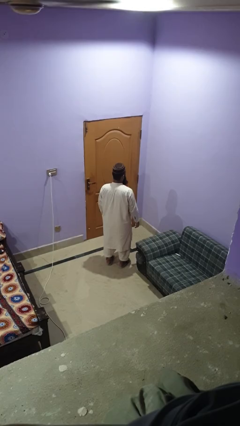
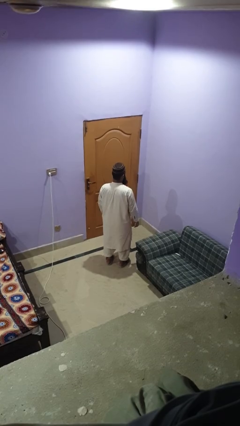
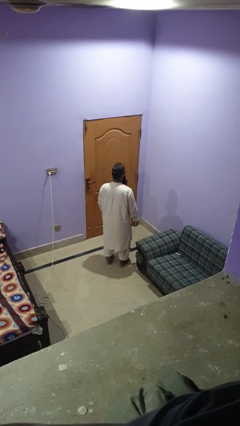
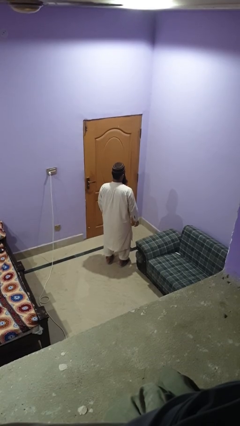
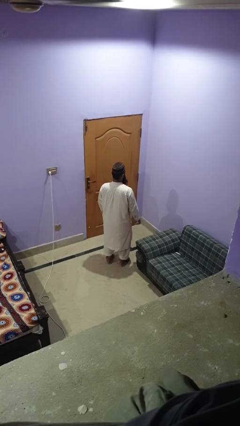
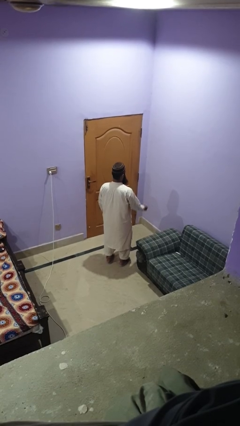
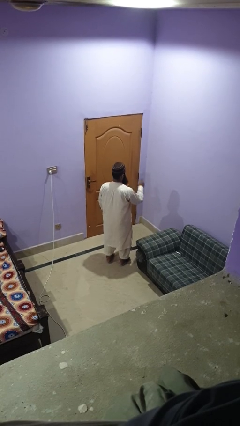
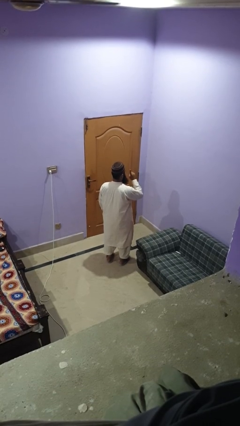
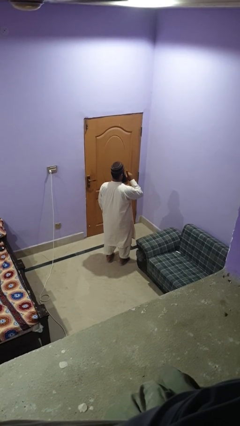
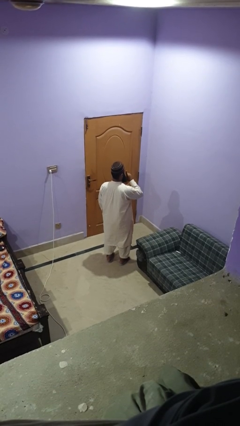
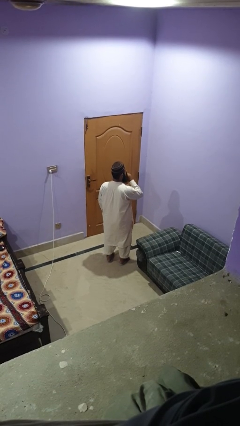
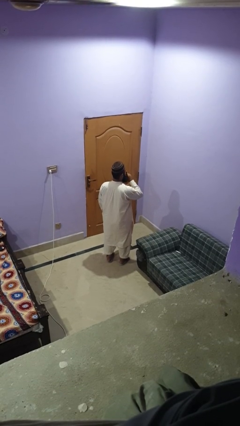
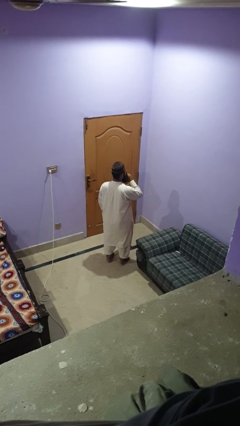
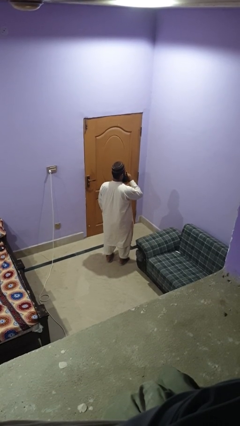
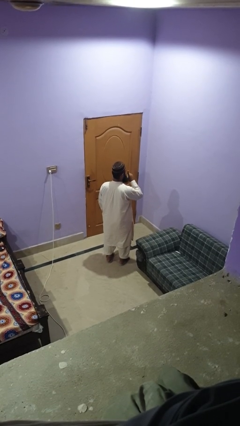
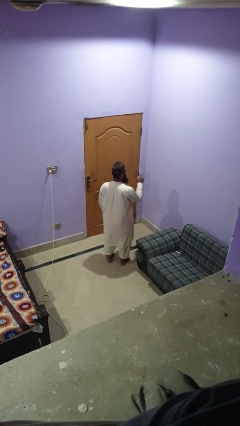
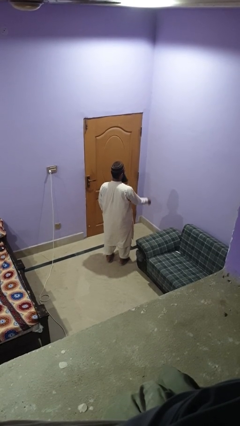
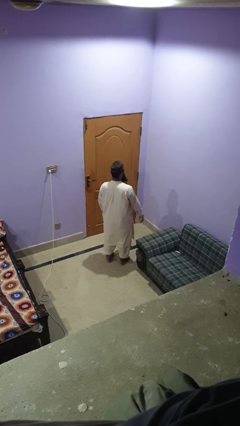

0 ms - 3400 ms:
person gestures be quiet

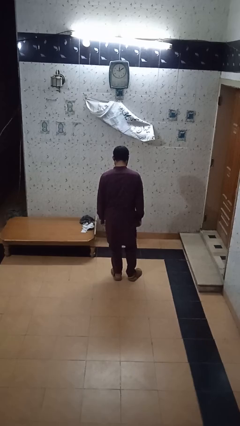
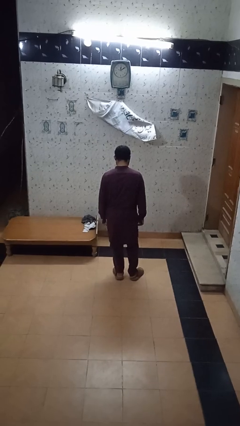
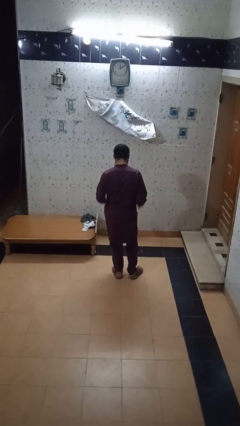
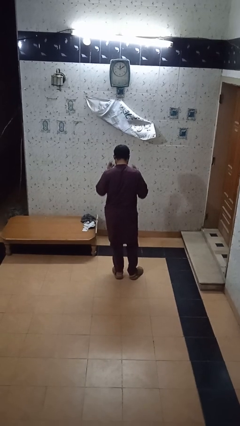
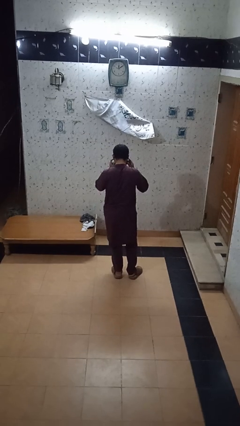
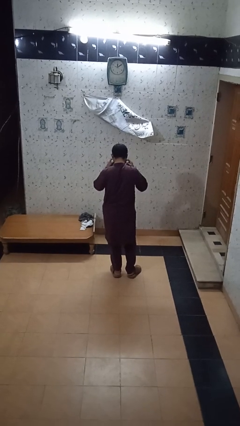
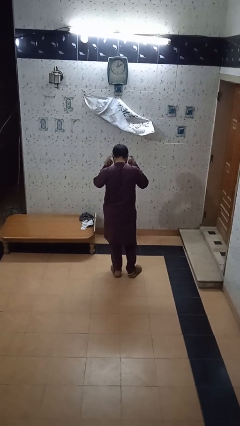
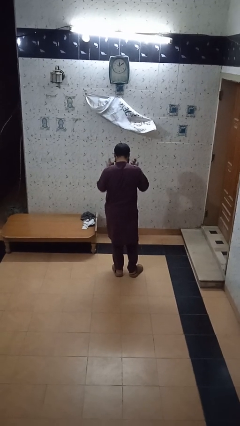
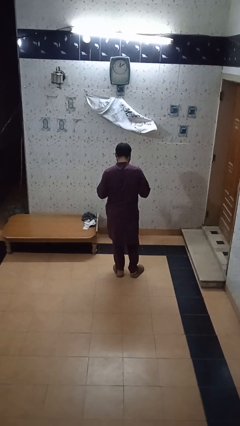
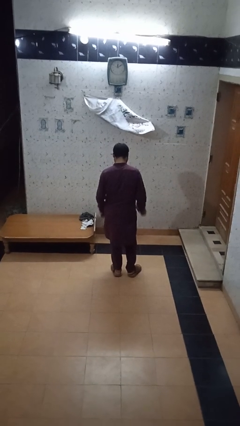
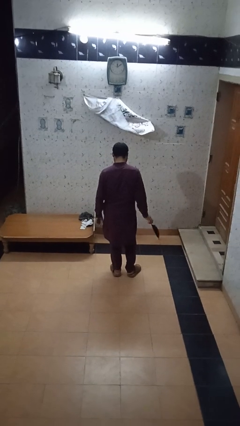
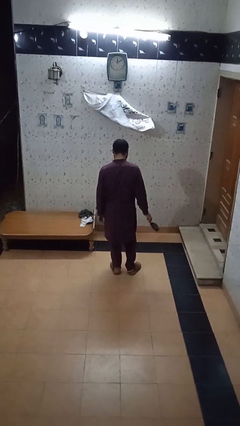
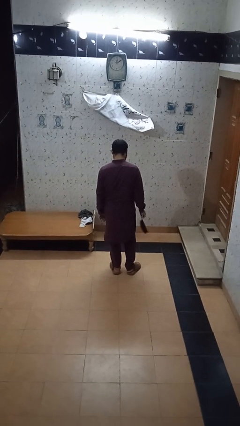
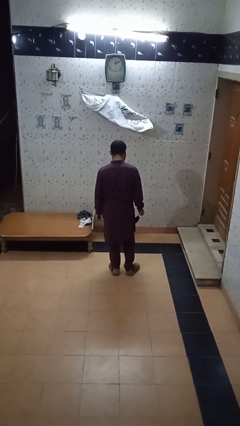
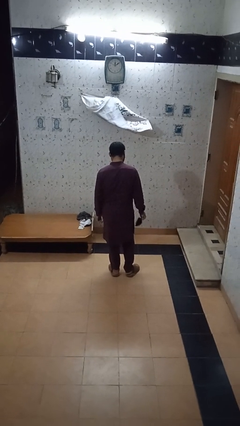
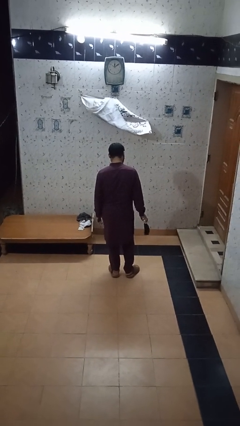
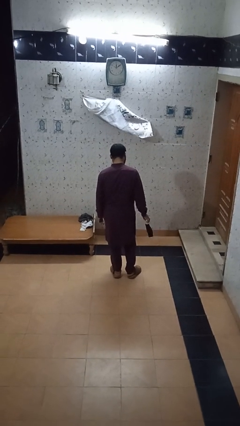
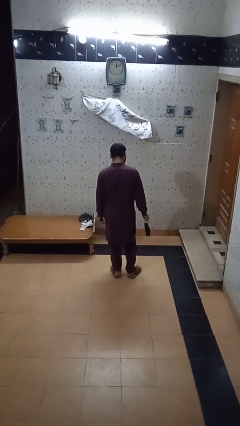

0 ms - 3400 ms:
person takes off facemask

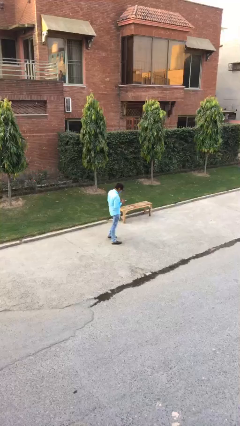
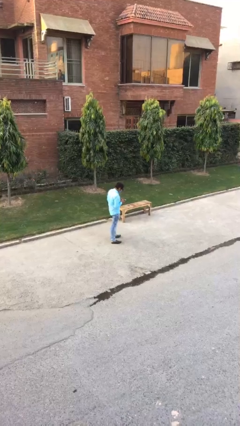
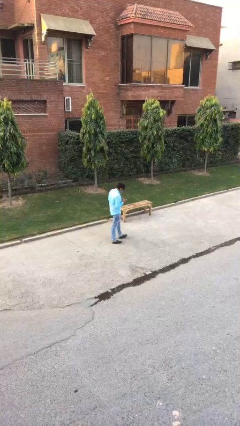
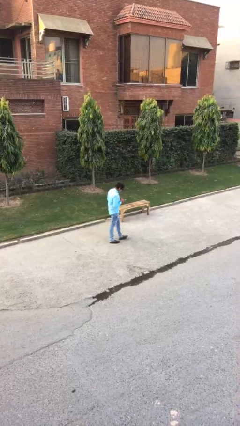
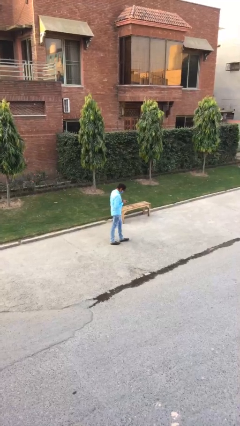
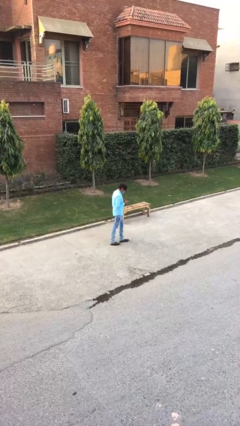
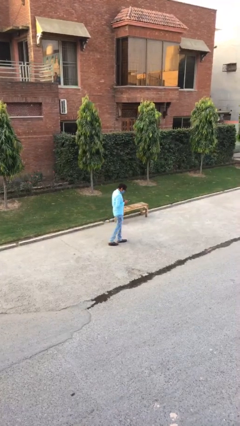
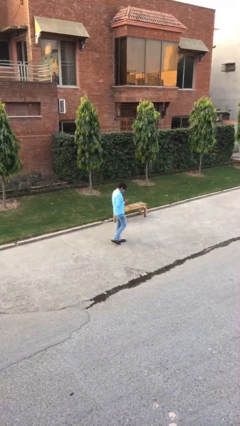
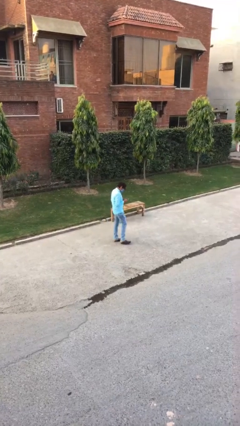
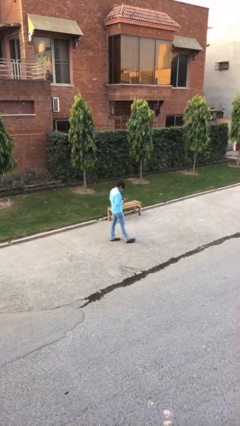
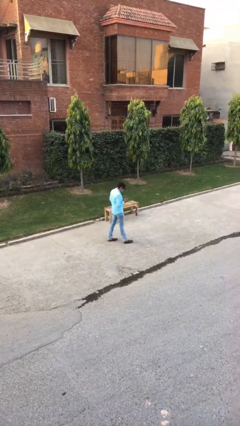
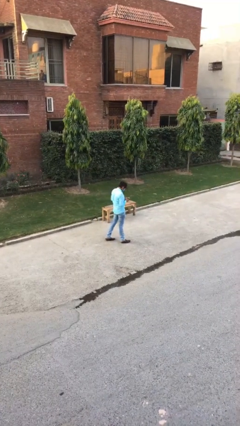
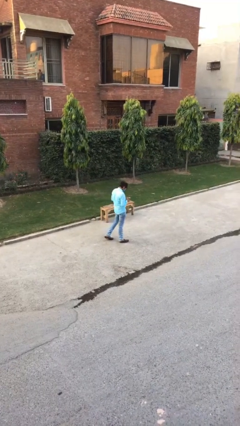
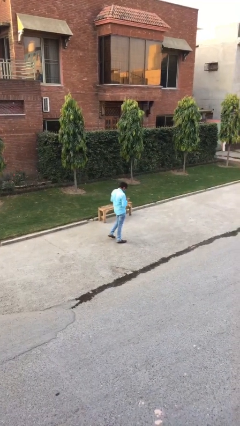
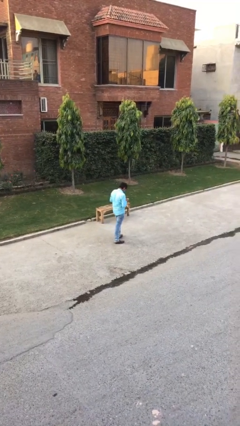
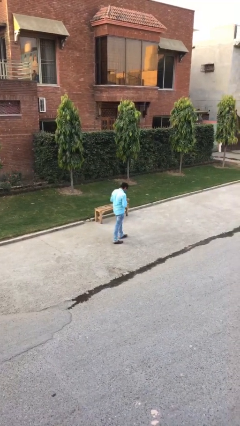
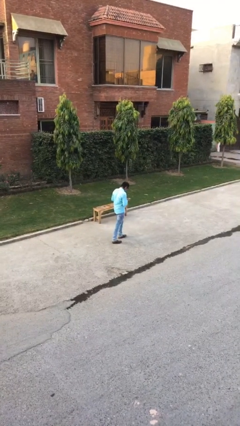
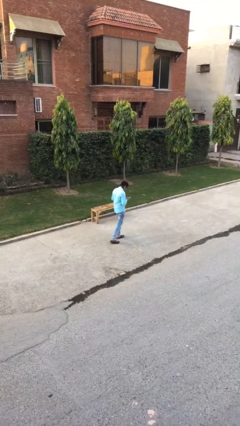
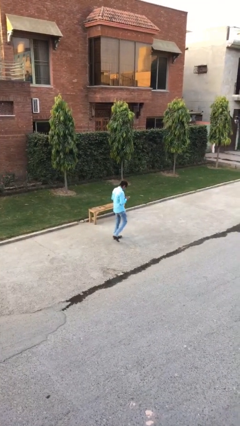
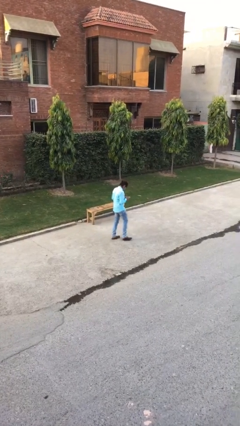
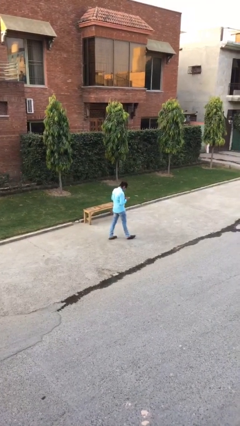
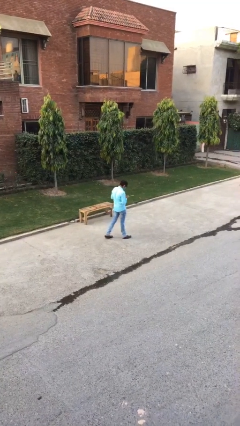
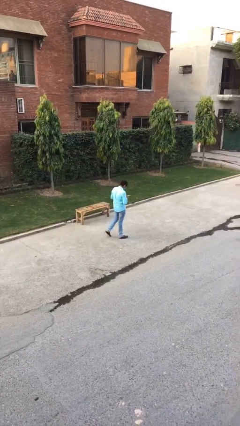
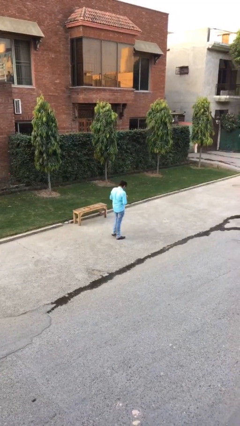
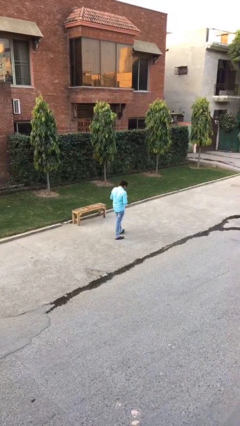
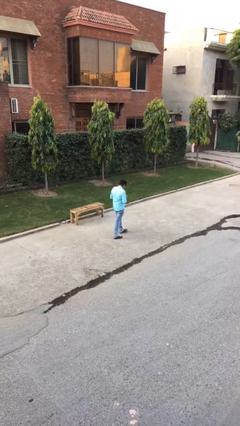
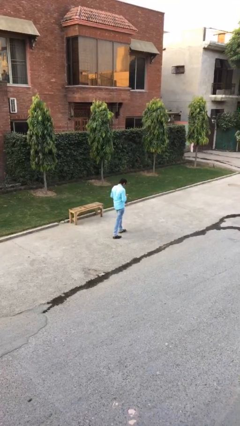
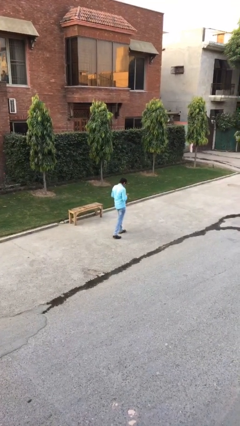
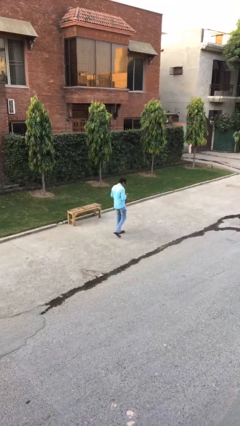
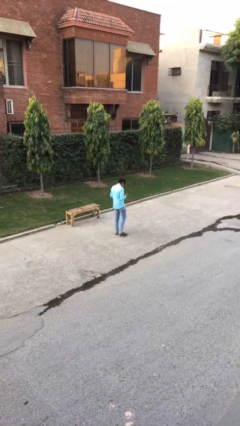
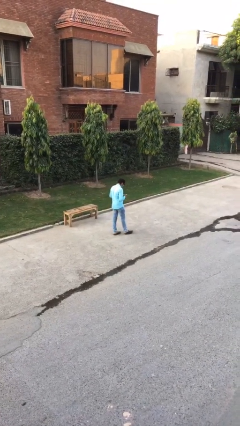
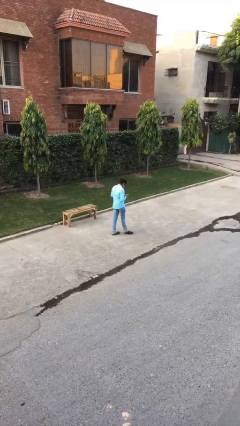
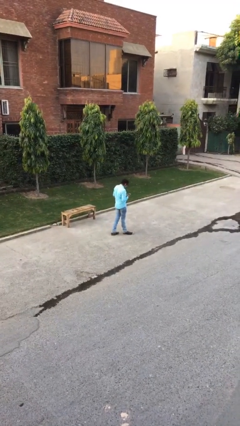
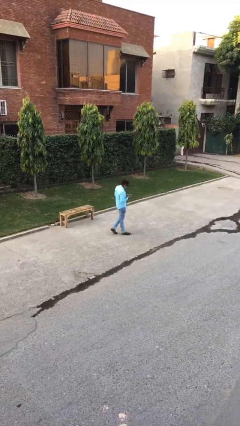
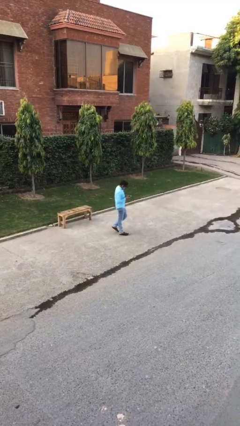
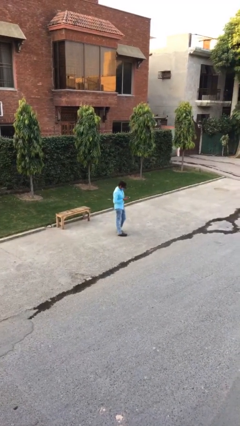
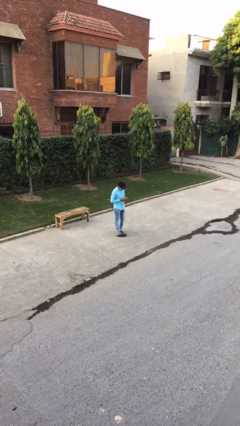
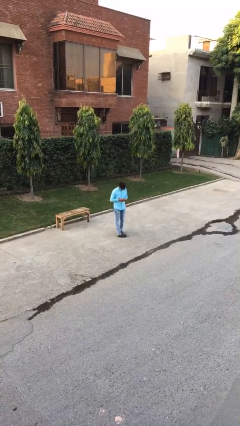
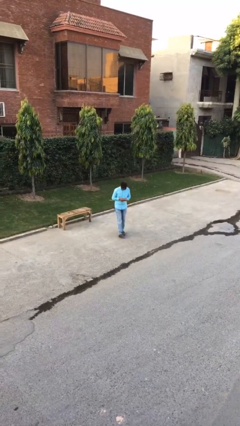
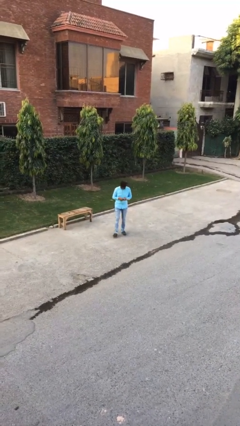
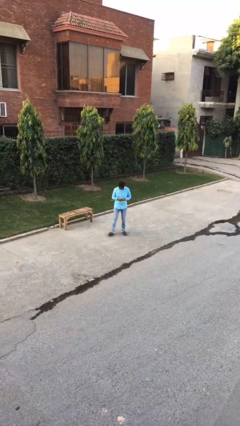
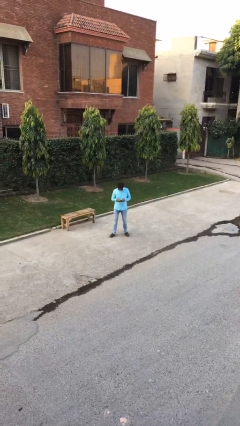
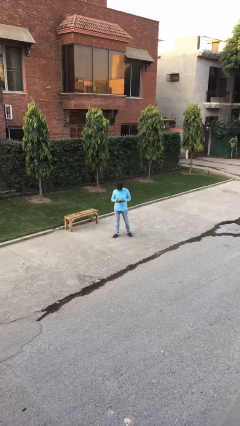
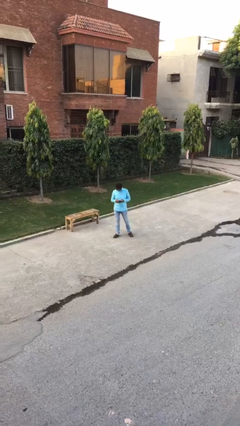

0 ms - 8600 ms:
person texts on phone

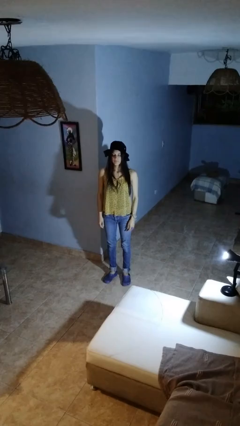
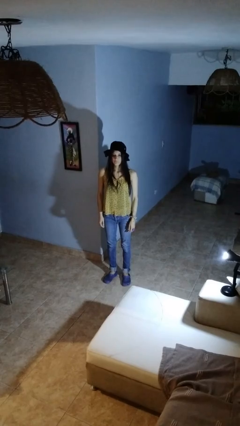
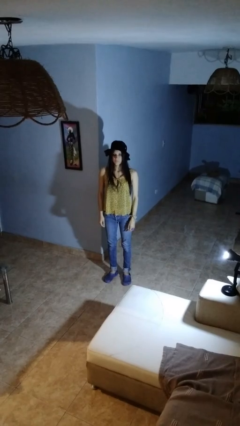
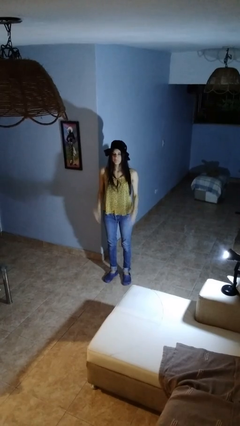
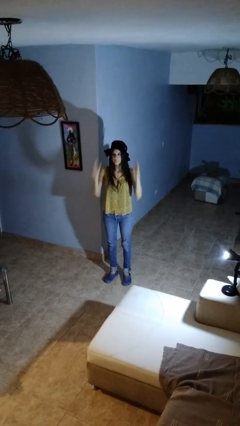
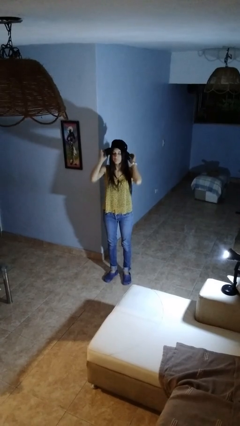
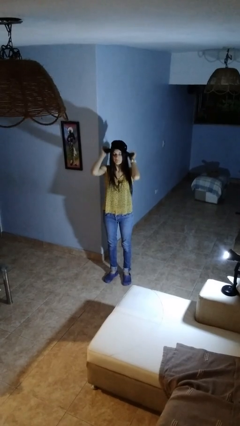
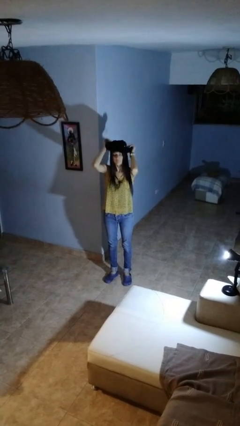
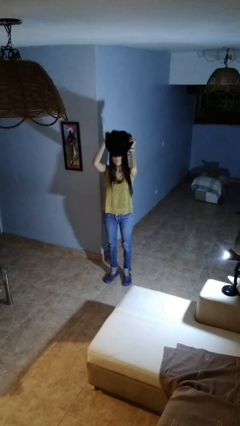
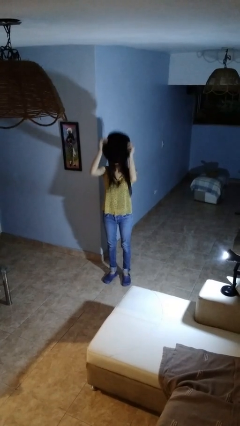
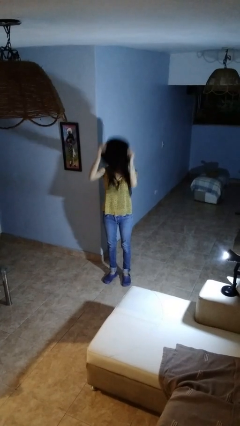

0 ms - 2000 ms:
person takes off hat
